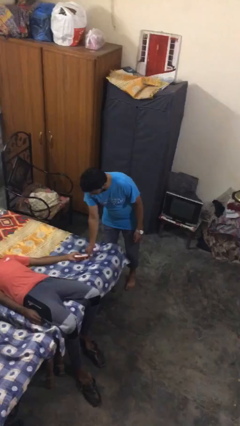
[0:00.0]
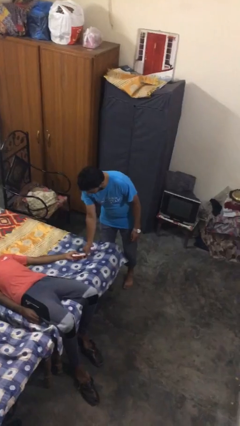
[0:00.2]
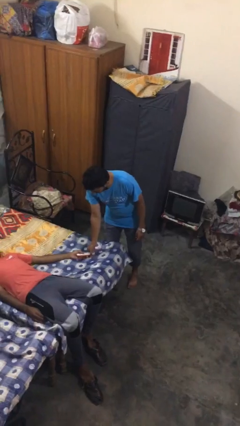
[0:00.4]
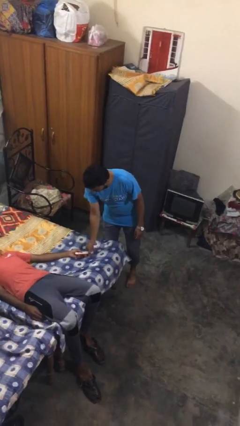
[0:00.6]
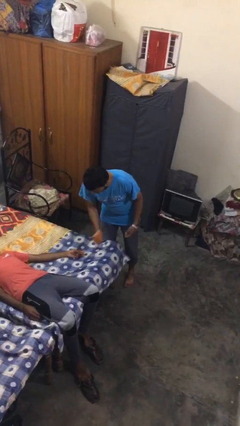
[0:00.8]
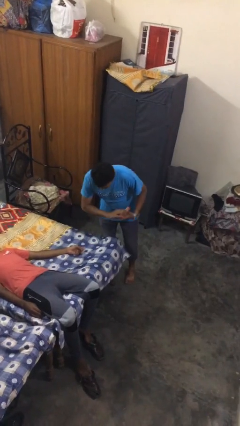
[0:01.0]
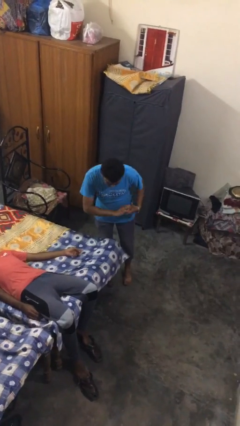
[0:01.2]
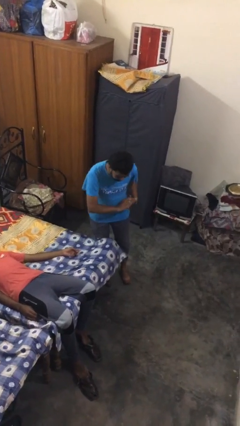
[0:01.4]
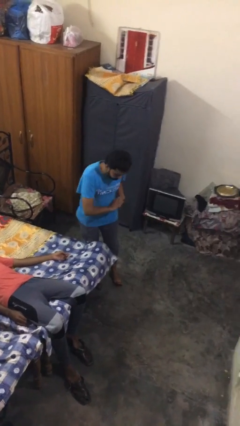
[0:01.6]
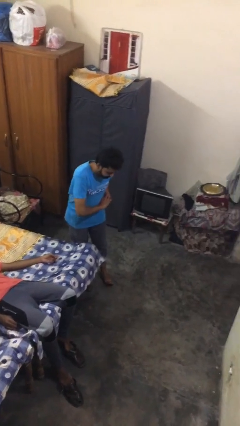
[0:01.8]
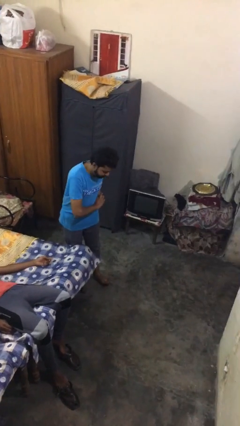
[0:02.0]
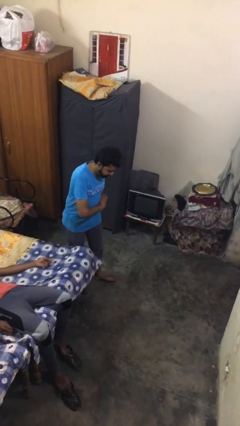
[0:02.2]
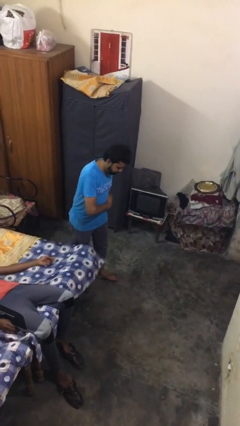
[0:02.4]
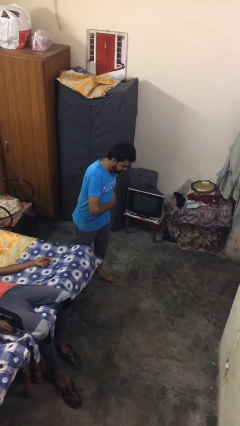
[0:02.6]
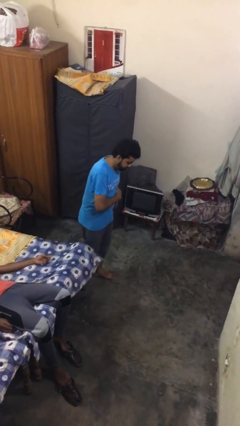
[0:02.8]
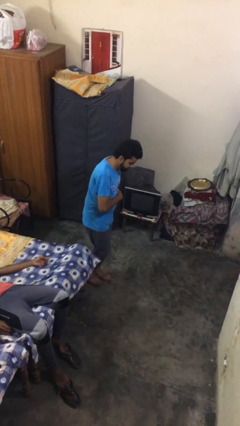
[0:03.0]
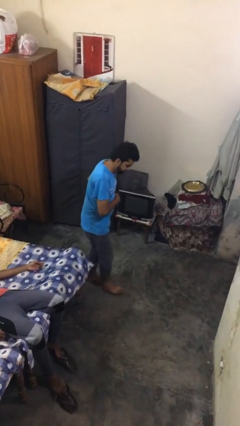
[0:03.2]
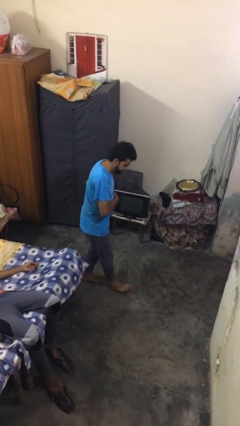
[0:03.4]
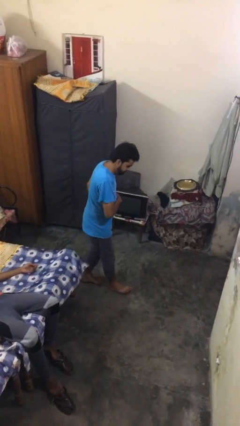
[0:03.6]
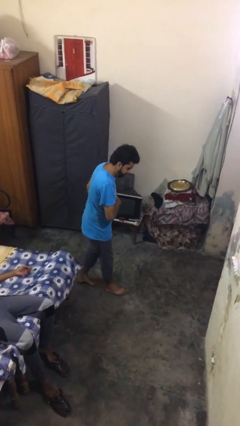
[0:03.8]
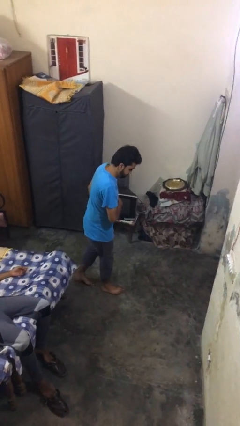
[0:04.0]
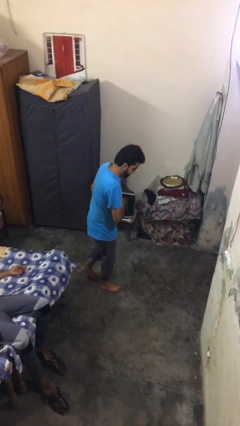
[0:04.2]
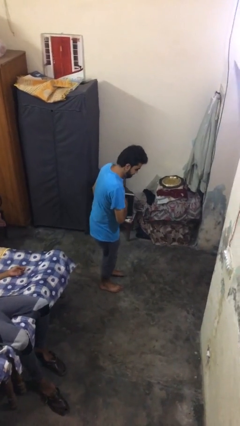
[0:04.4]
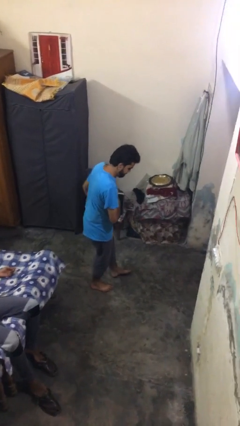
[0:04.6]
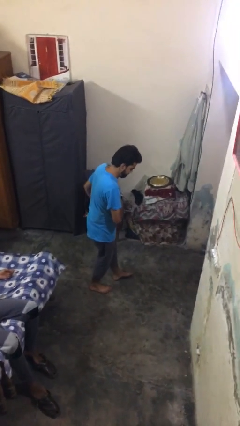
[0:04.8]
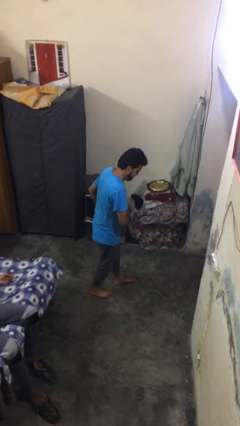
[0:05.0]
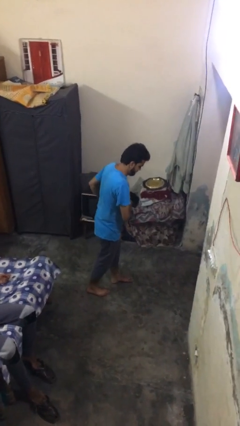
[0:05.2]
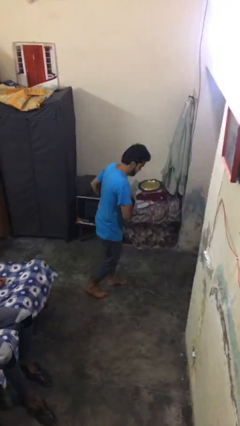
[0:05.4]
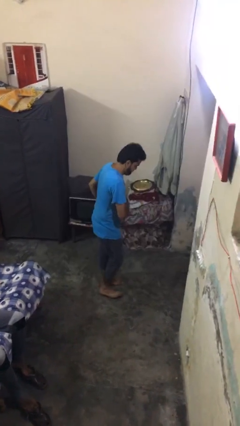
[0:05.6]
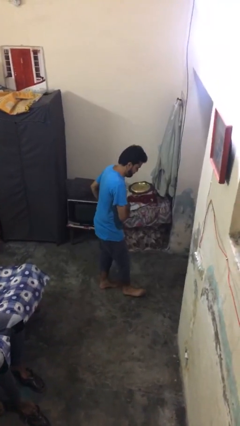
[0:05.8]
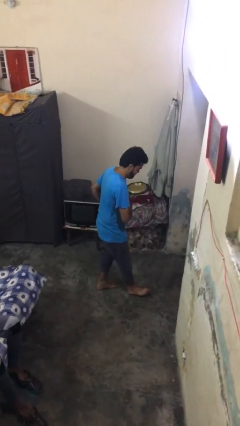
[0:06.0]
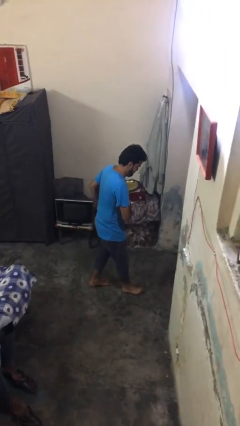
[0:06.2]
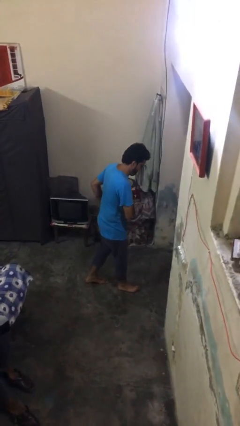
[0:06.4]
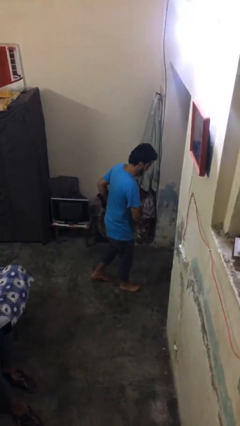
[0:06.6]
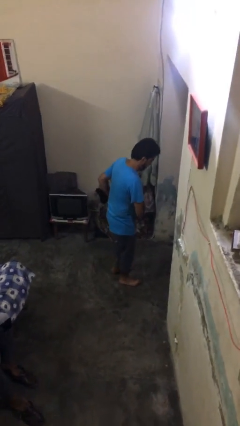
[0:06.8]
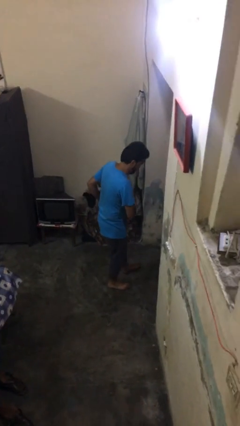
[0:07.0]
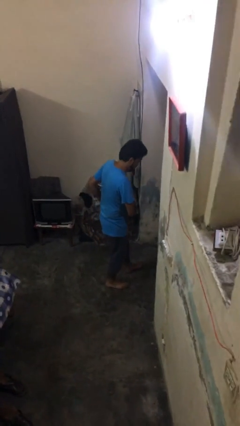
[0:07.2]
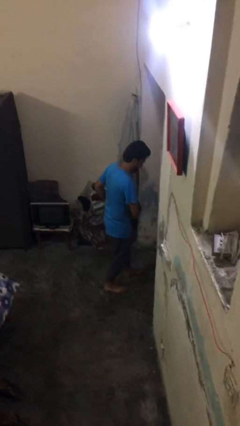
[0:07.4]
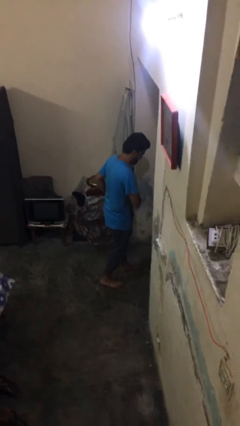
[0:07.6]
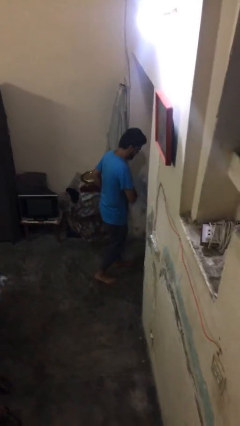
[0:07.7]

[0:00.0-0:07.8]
person steals object from person

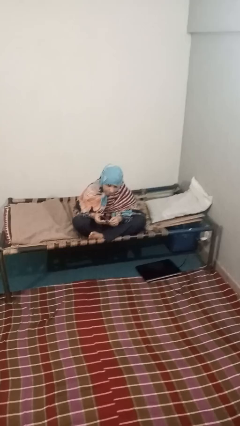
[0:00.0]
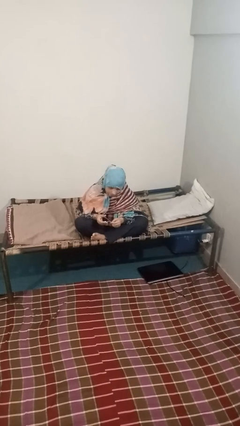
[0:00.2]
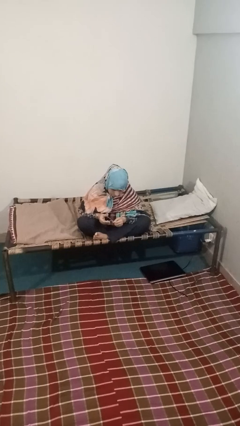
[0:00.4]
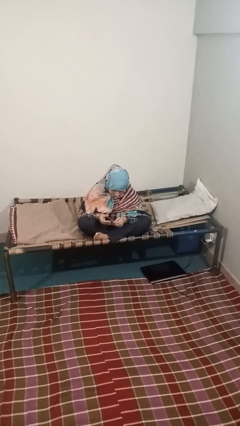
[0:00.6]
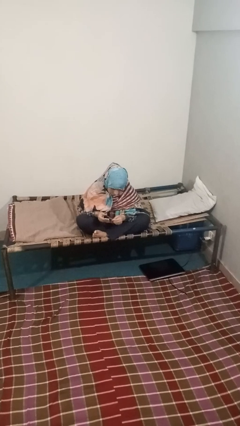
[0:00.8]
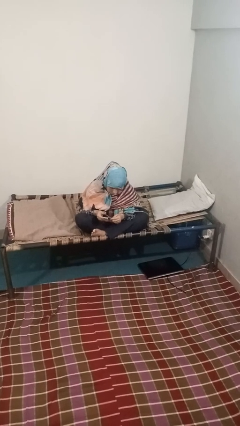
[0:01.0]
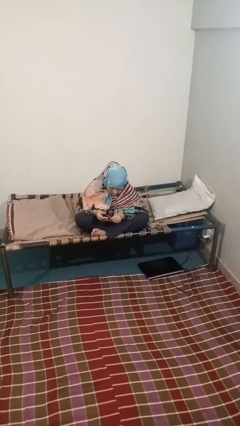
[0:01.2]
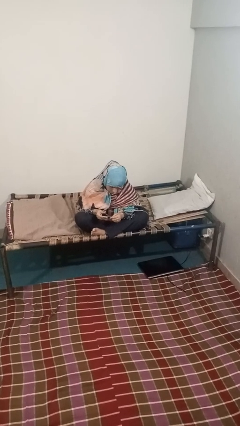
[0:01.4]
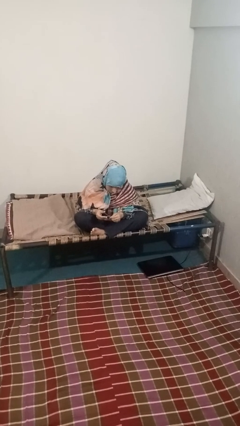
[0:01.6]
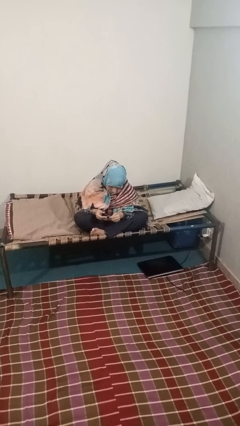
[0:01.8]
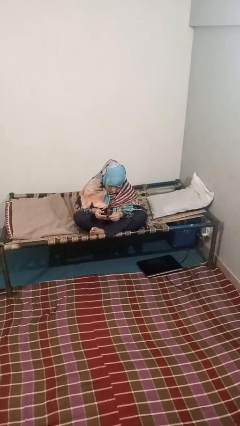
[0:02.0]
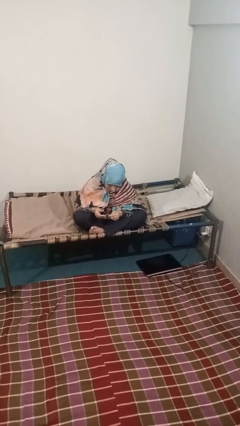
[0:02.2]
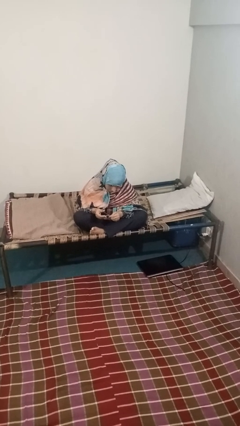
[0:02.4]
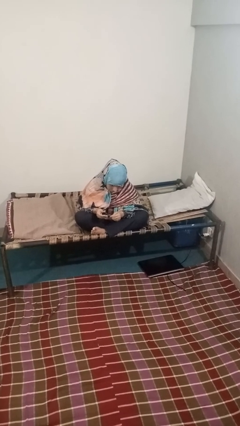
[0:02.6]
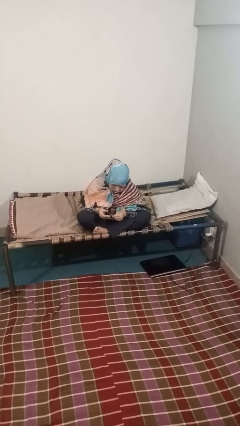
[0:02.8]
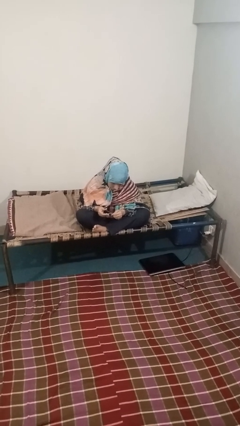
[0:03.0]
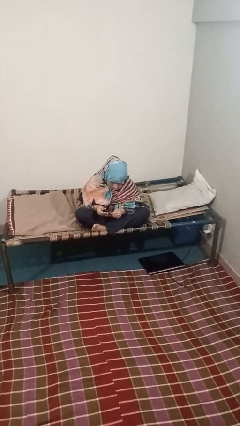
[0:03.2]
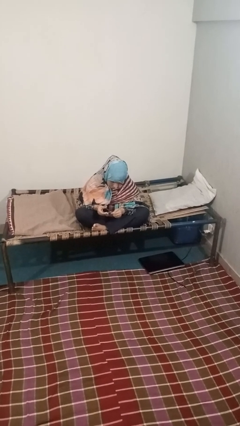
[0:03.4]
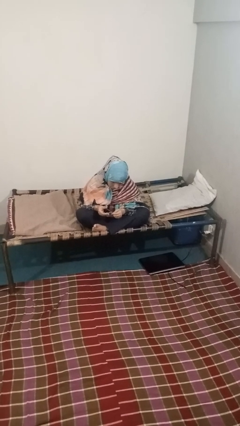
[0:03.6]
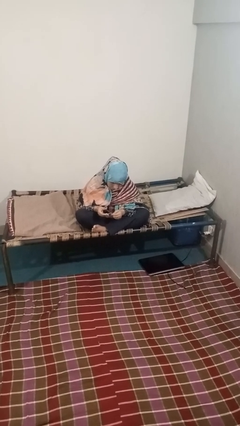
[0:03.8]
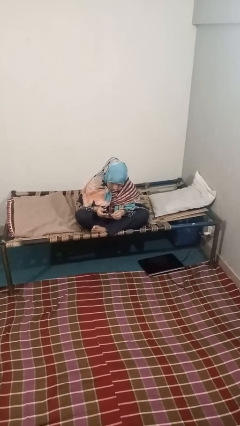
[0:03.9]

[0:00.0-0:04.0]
person clips fingernails

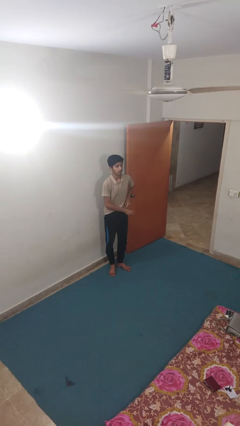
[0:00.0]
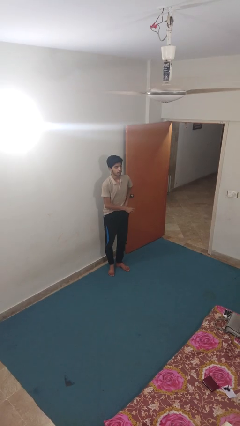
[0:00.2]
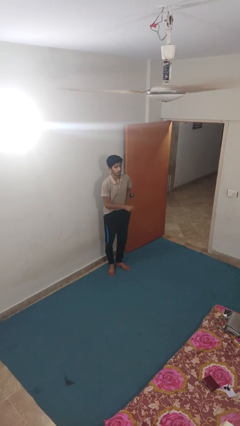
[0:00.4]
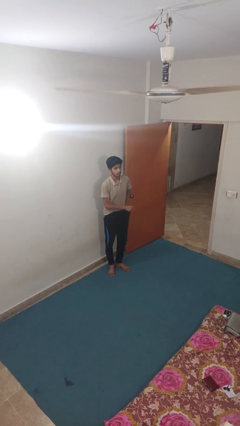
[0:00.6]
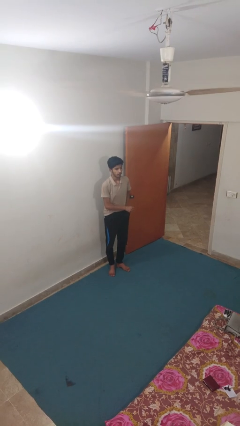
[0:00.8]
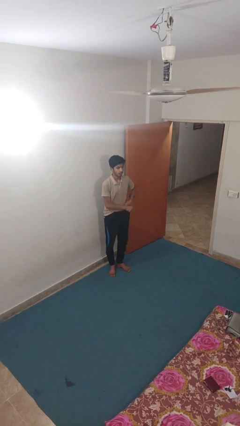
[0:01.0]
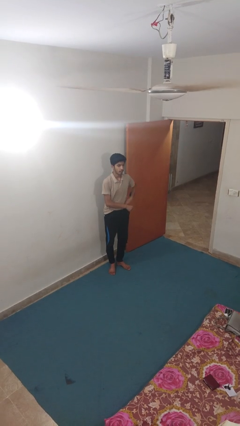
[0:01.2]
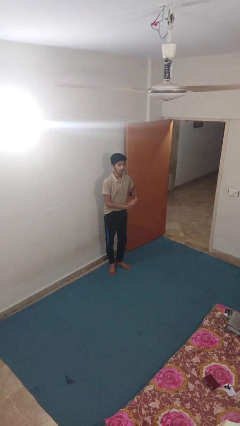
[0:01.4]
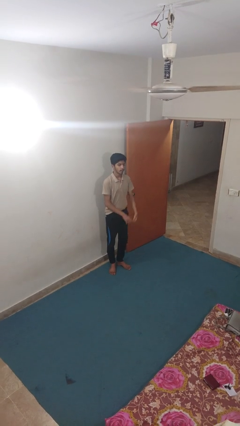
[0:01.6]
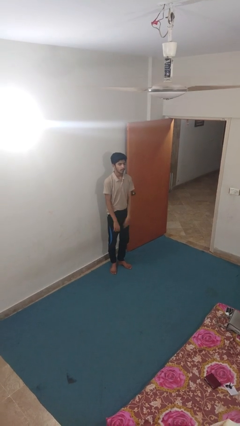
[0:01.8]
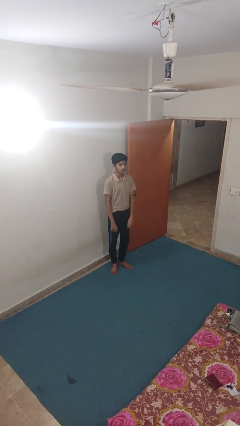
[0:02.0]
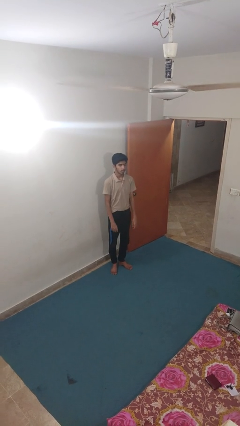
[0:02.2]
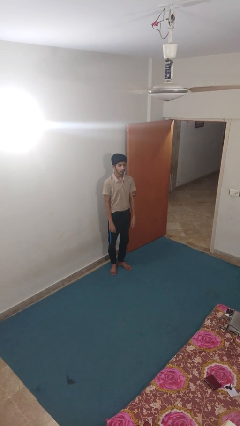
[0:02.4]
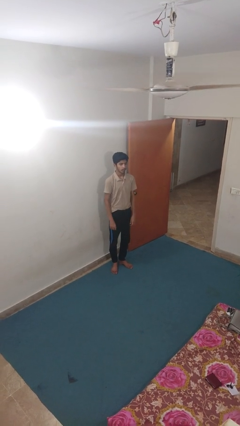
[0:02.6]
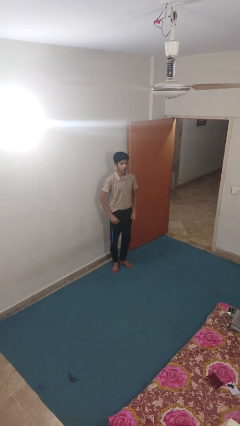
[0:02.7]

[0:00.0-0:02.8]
person tucks in shirt

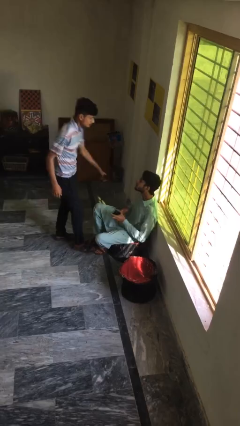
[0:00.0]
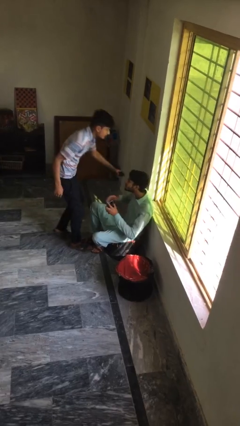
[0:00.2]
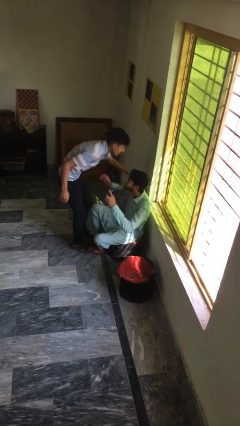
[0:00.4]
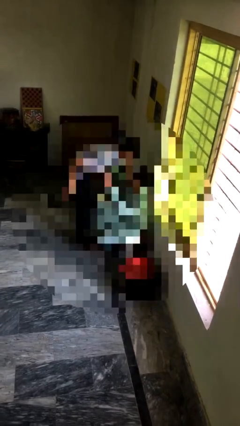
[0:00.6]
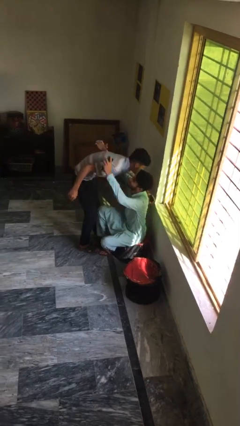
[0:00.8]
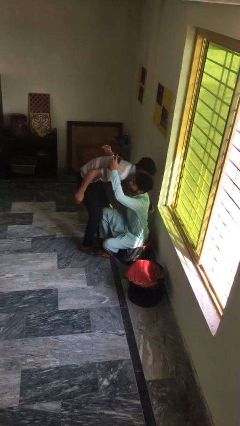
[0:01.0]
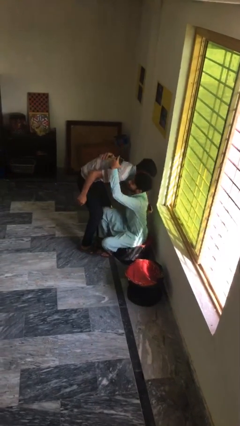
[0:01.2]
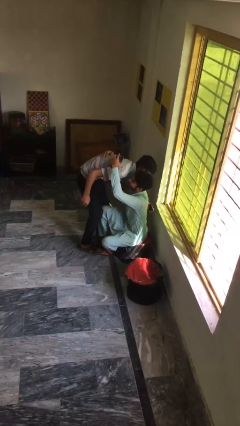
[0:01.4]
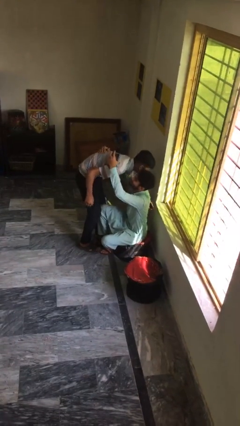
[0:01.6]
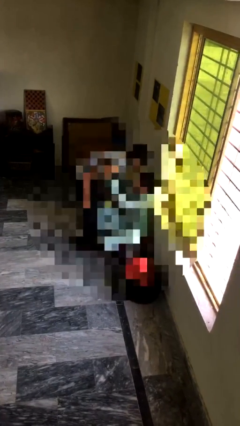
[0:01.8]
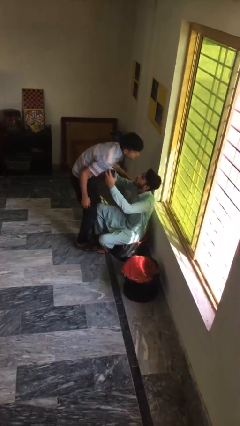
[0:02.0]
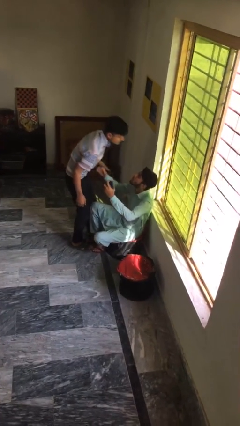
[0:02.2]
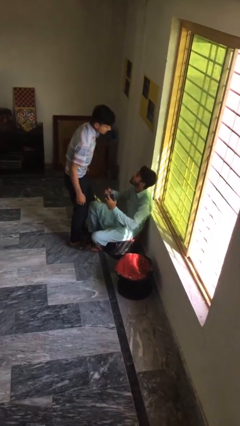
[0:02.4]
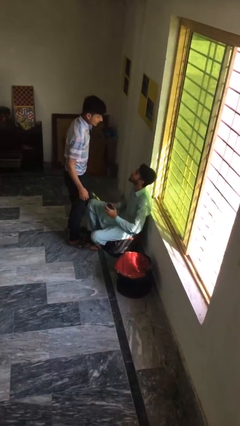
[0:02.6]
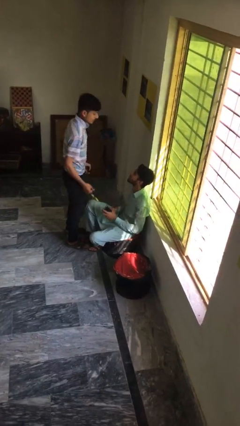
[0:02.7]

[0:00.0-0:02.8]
person embraces person

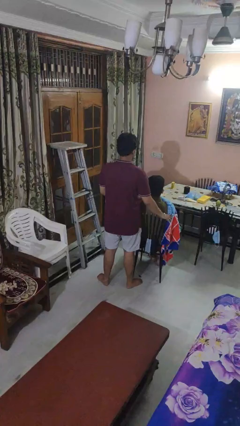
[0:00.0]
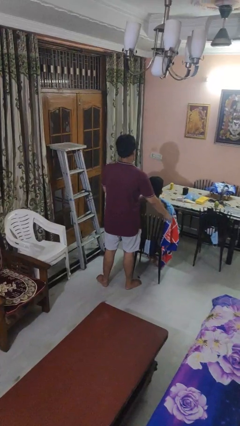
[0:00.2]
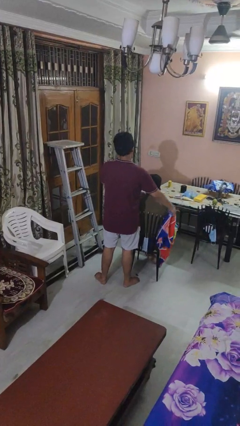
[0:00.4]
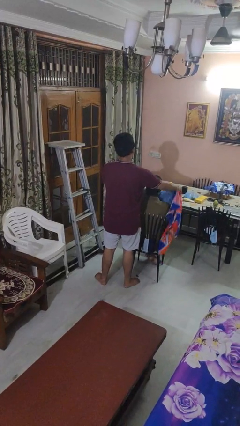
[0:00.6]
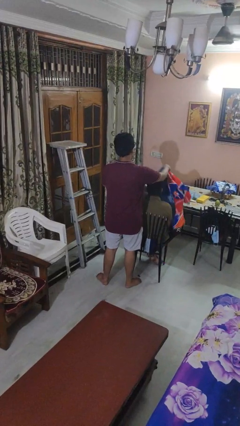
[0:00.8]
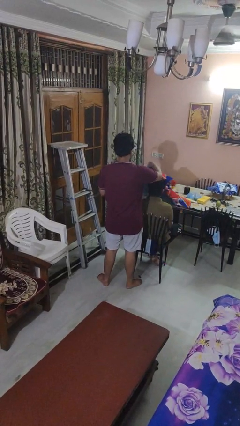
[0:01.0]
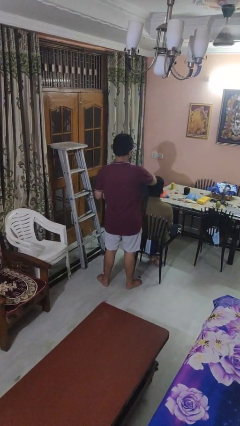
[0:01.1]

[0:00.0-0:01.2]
person uncovers friend with blanket
